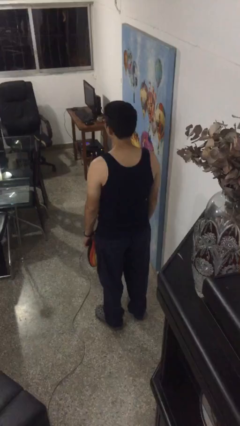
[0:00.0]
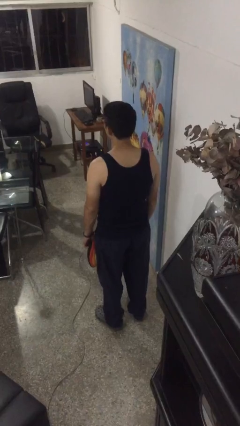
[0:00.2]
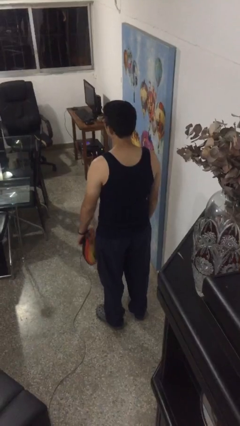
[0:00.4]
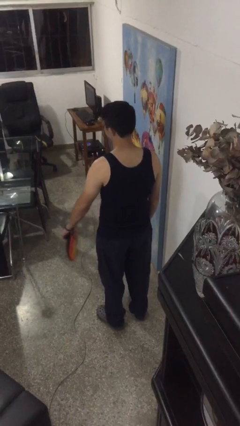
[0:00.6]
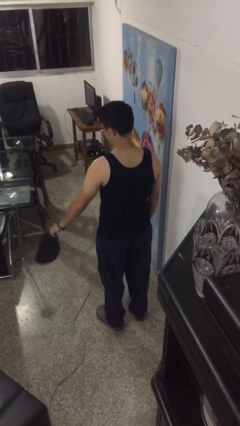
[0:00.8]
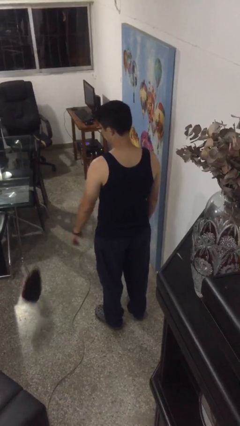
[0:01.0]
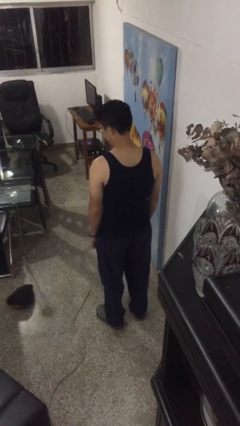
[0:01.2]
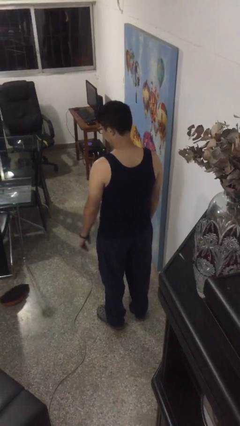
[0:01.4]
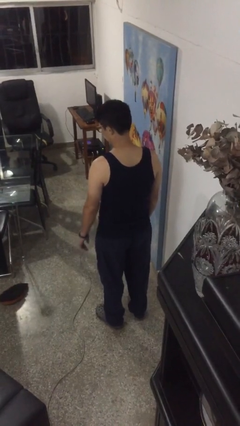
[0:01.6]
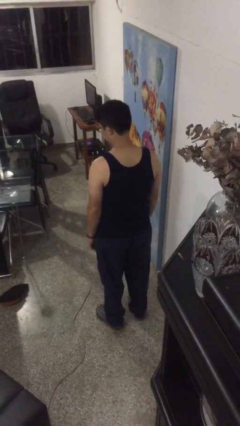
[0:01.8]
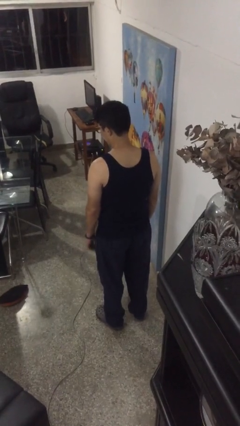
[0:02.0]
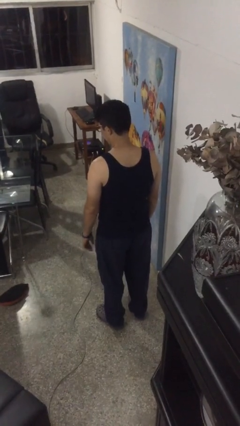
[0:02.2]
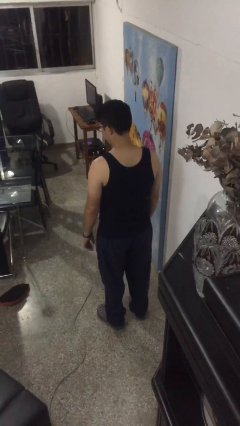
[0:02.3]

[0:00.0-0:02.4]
person throws object to ground

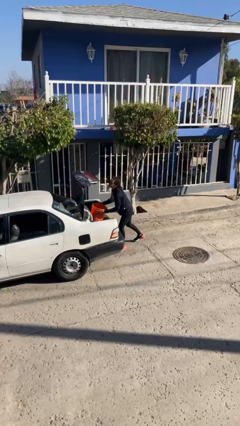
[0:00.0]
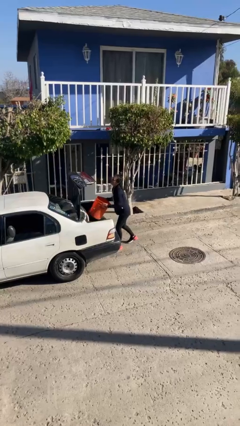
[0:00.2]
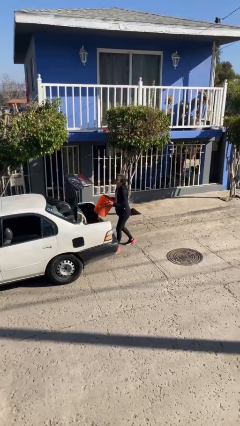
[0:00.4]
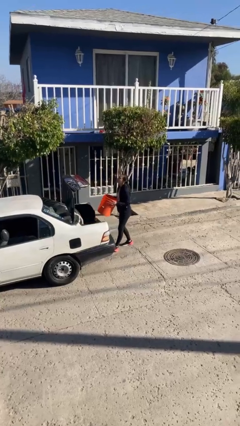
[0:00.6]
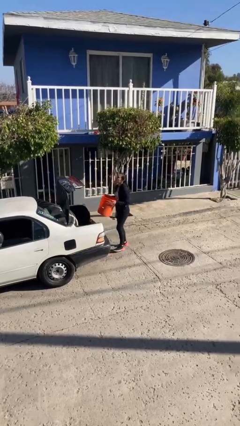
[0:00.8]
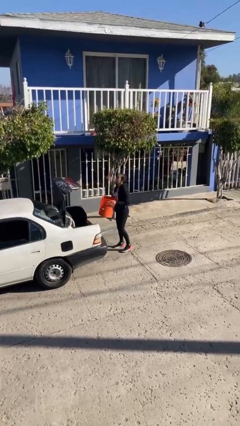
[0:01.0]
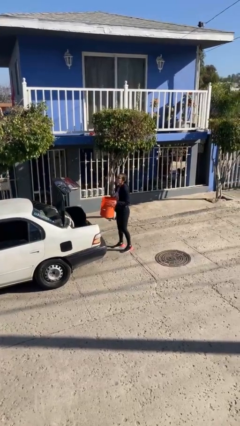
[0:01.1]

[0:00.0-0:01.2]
person unloads car

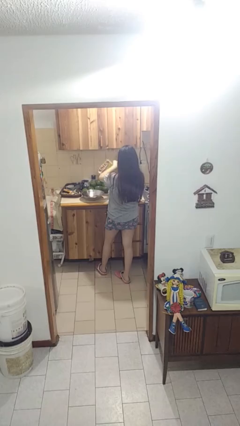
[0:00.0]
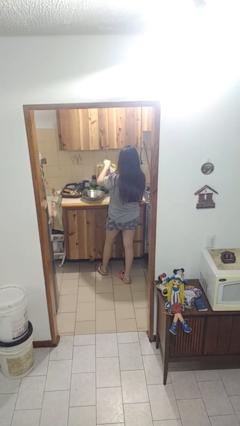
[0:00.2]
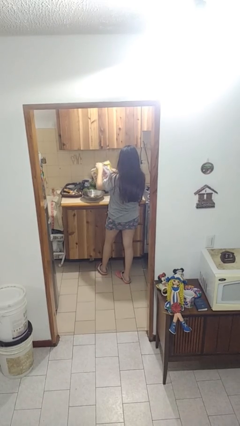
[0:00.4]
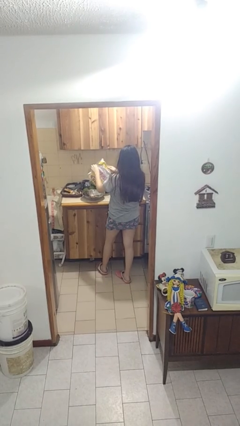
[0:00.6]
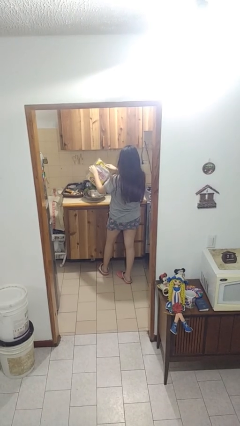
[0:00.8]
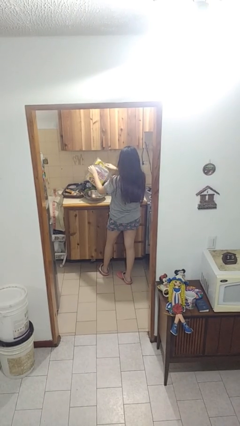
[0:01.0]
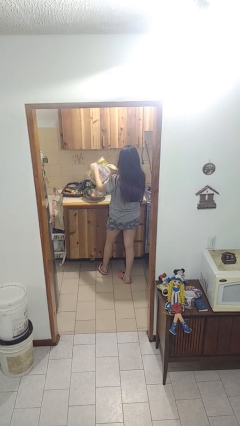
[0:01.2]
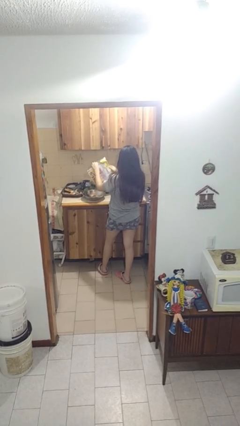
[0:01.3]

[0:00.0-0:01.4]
person pours into bowl

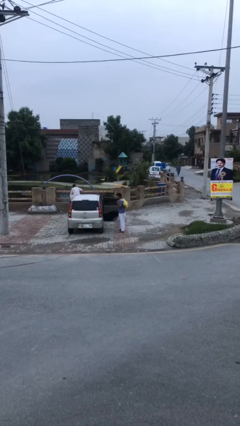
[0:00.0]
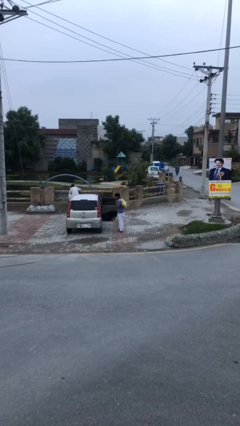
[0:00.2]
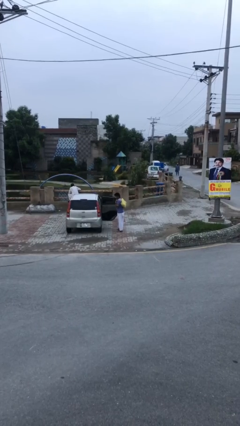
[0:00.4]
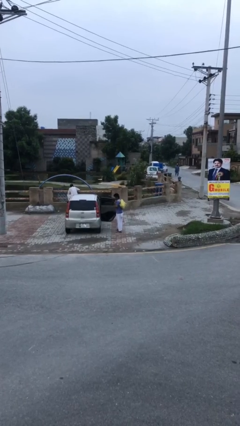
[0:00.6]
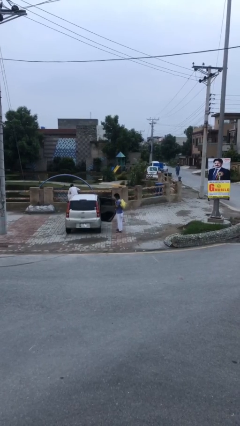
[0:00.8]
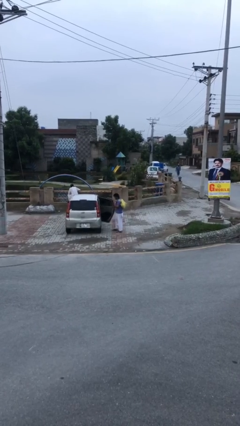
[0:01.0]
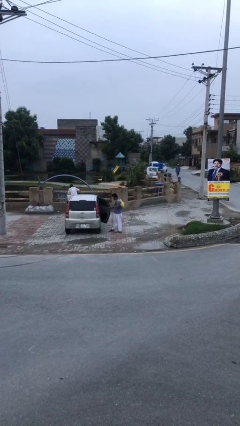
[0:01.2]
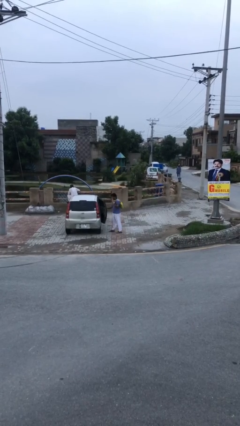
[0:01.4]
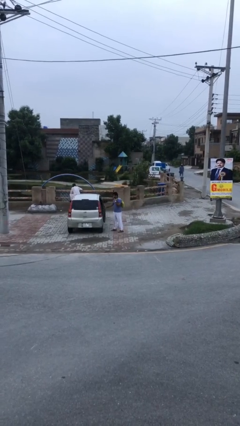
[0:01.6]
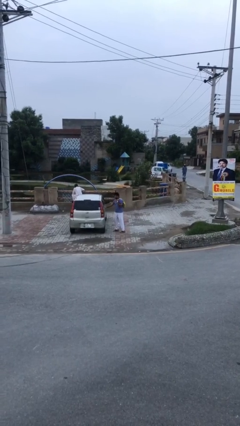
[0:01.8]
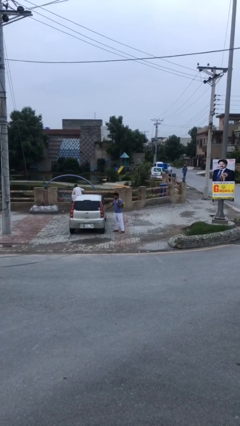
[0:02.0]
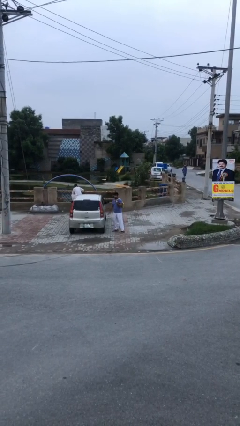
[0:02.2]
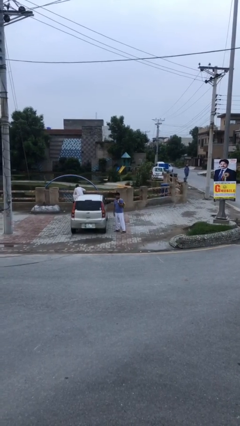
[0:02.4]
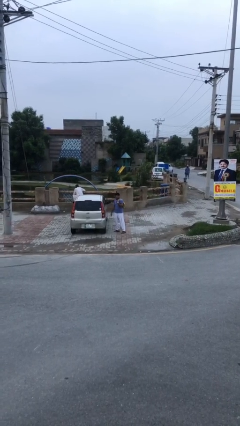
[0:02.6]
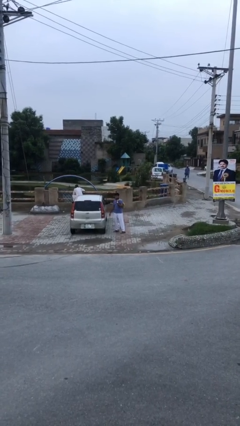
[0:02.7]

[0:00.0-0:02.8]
person closes car door

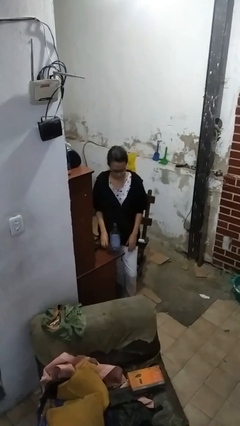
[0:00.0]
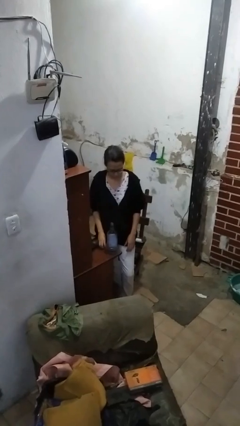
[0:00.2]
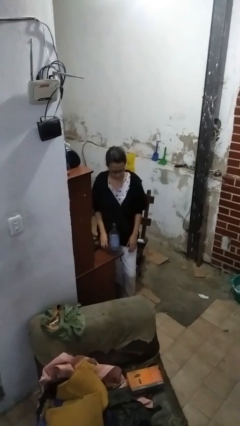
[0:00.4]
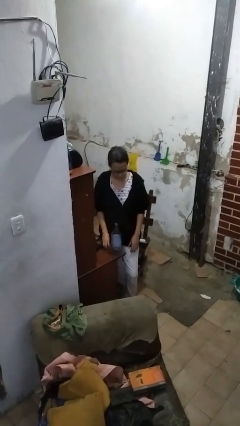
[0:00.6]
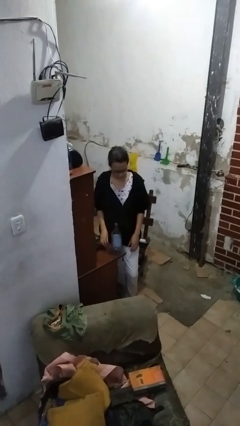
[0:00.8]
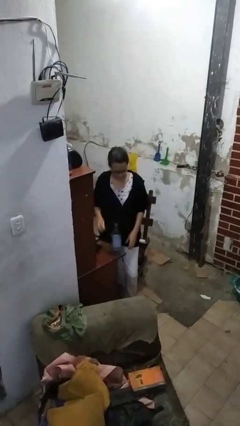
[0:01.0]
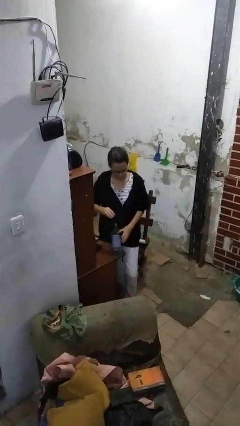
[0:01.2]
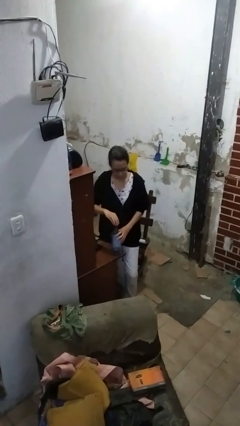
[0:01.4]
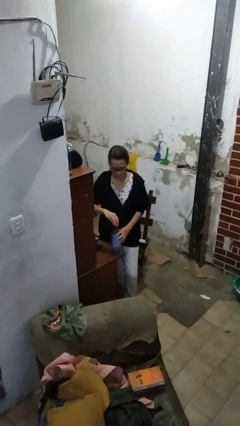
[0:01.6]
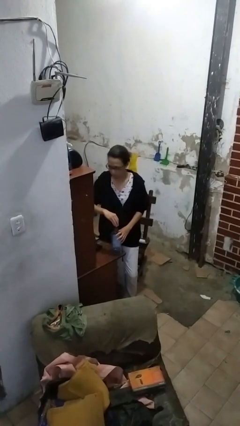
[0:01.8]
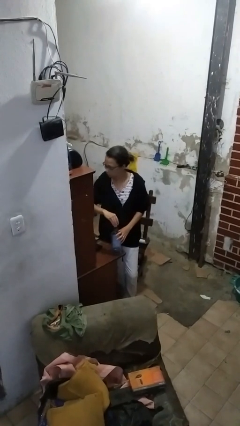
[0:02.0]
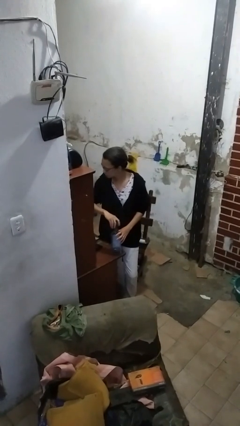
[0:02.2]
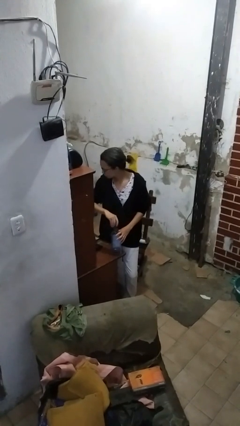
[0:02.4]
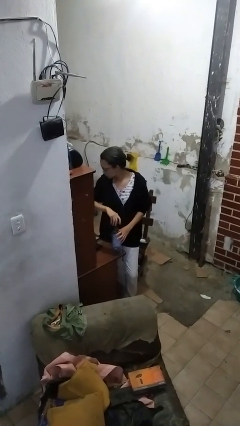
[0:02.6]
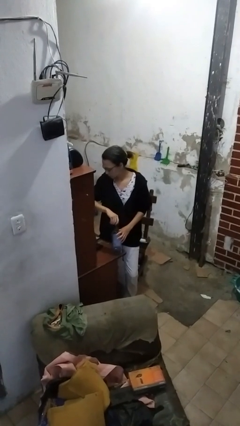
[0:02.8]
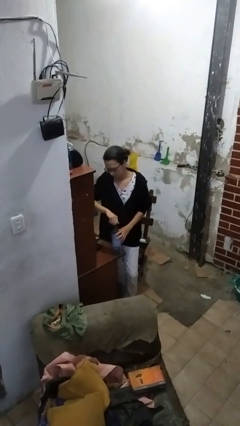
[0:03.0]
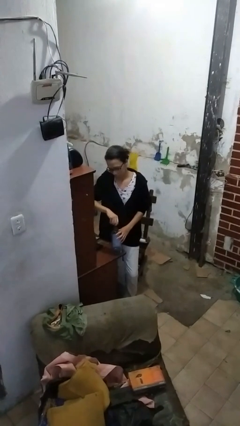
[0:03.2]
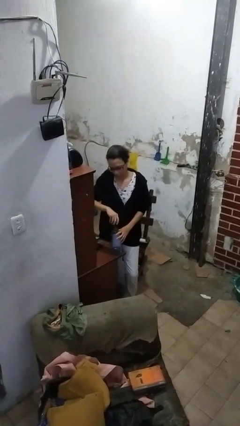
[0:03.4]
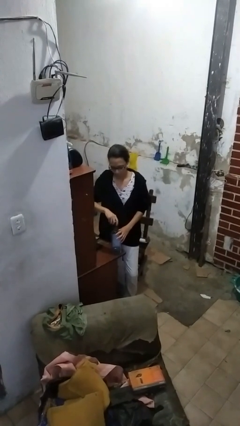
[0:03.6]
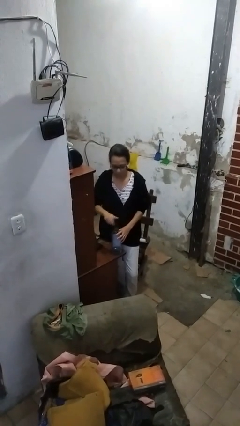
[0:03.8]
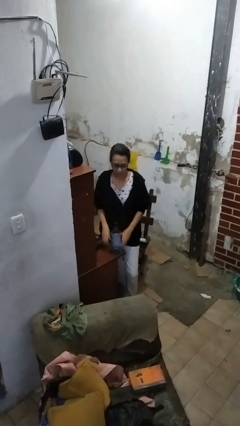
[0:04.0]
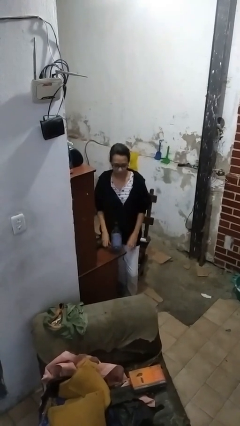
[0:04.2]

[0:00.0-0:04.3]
person screws lid to bottle

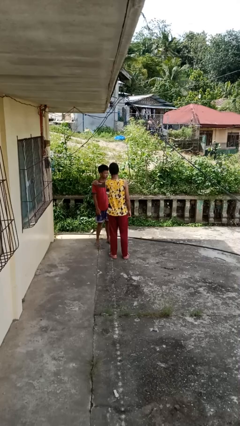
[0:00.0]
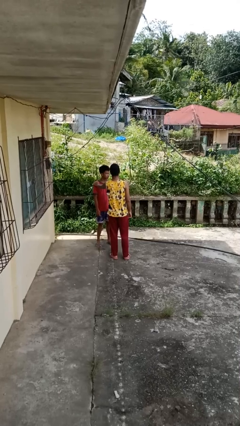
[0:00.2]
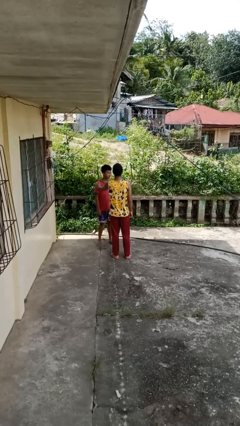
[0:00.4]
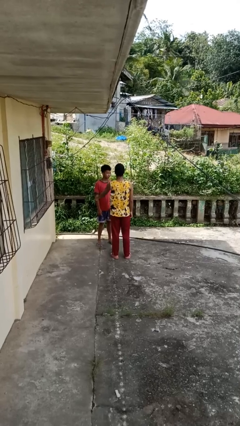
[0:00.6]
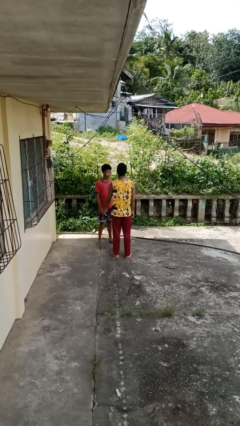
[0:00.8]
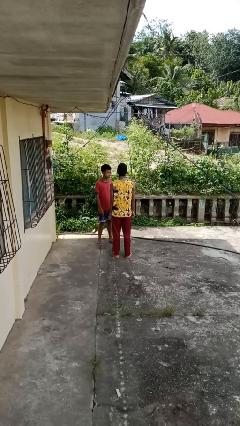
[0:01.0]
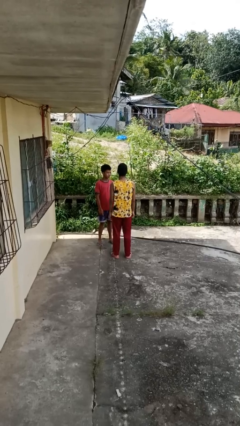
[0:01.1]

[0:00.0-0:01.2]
person shoves person

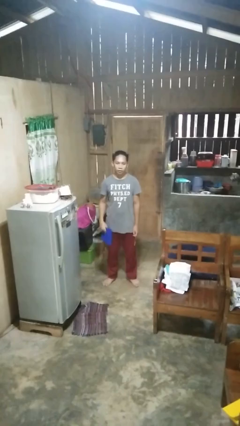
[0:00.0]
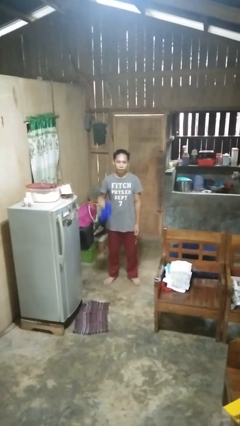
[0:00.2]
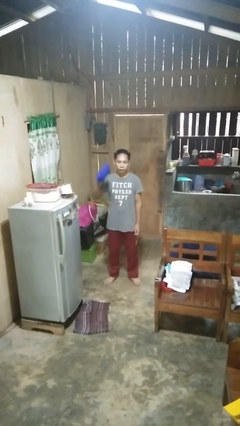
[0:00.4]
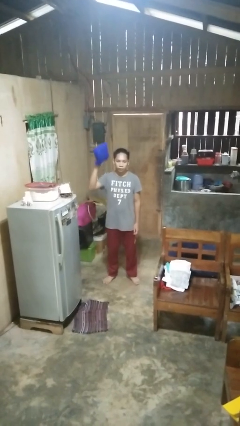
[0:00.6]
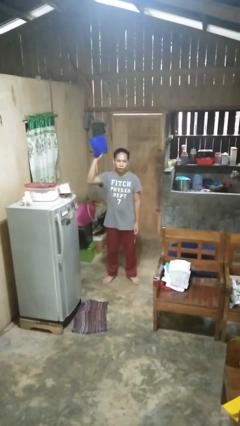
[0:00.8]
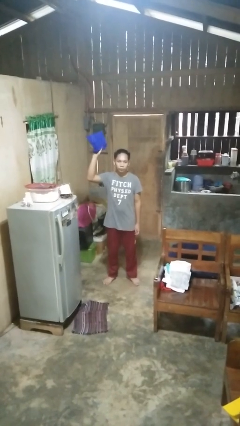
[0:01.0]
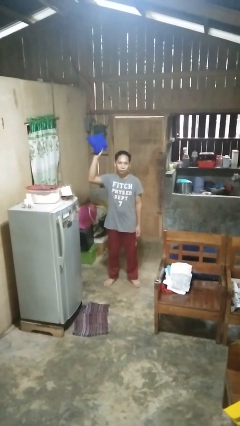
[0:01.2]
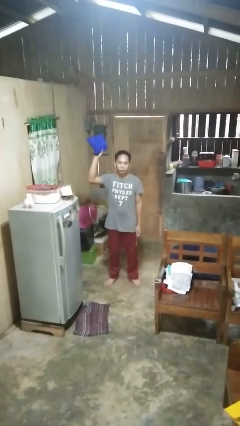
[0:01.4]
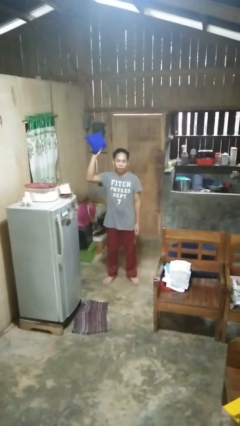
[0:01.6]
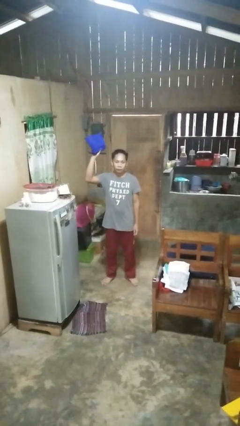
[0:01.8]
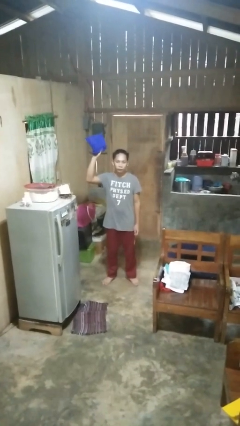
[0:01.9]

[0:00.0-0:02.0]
person holds object above head

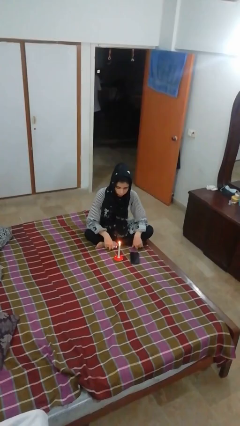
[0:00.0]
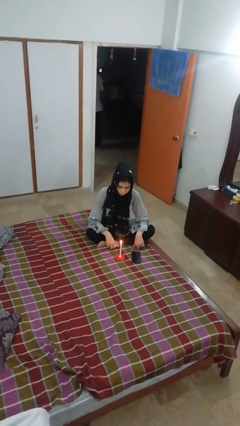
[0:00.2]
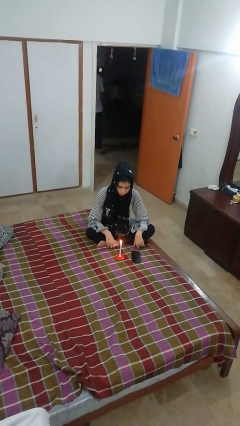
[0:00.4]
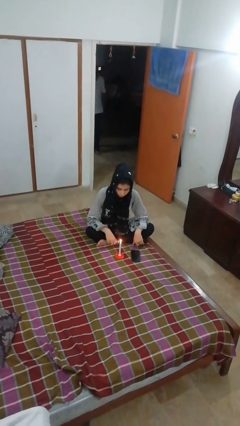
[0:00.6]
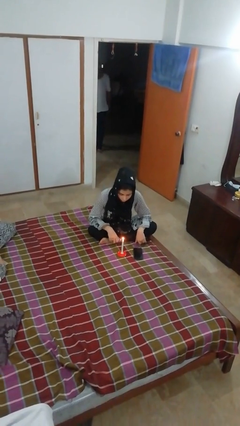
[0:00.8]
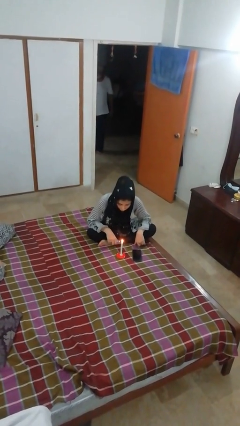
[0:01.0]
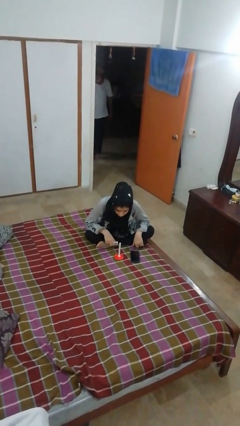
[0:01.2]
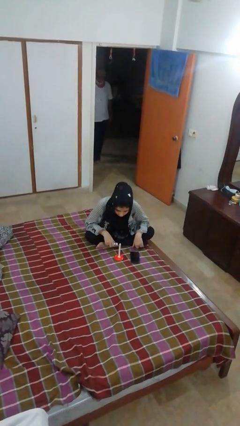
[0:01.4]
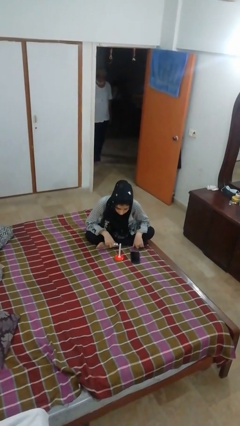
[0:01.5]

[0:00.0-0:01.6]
person extinguishes candle
